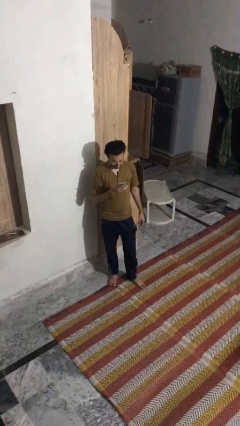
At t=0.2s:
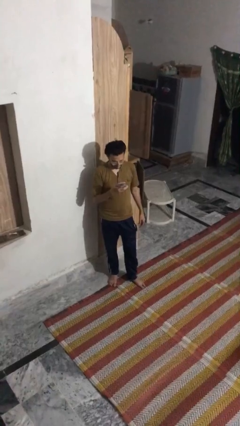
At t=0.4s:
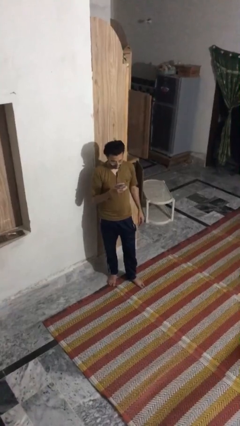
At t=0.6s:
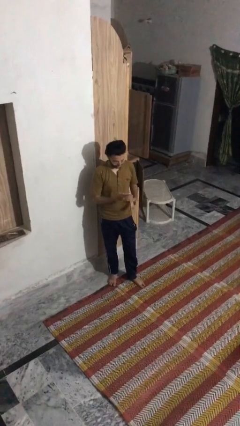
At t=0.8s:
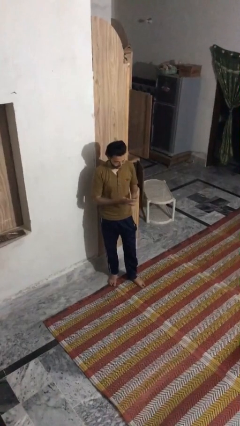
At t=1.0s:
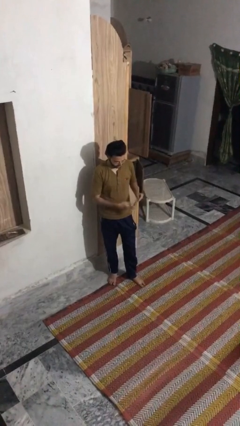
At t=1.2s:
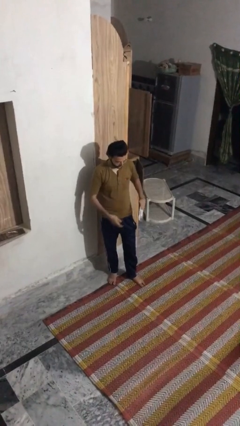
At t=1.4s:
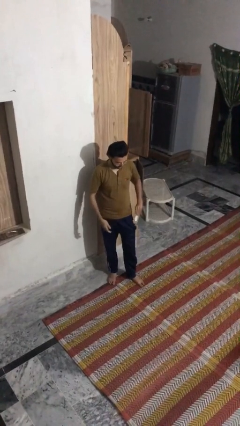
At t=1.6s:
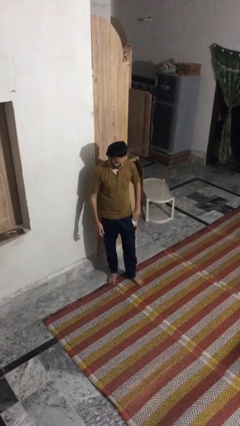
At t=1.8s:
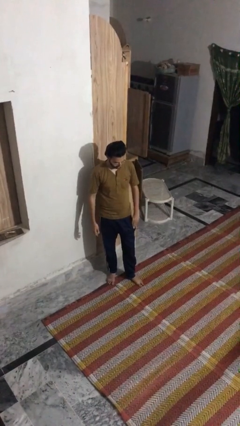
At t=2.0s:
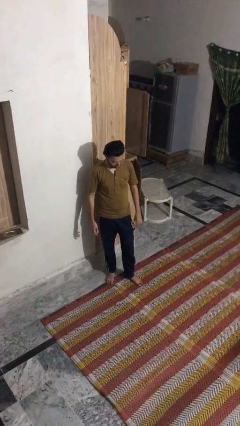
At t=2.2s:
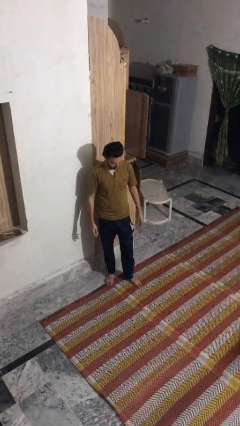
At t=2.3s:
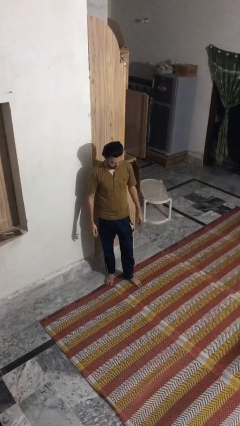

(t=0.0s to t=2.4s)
person puts phone into pocket

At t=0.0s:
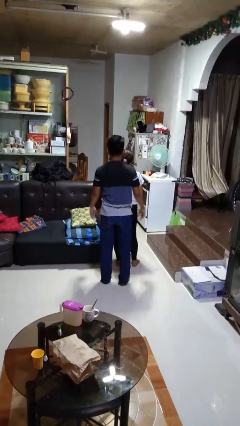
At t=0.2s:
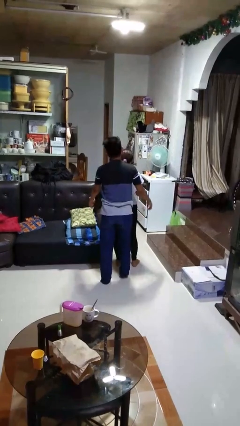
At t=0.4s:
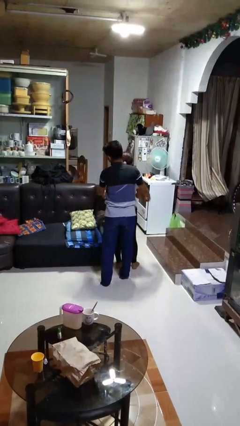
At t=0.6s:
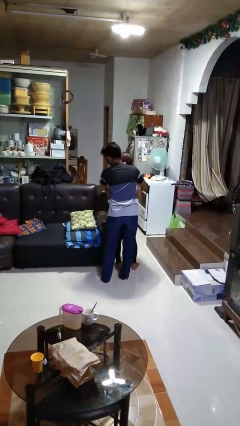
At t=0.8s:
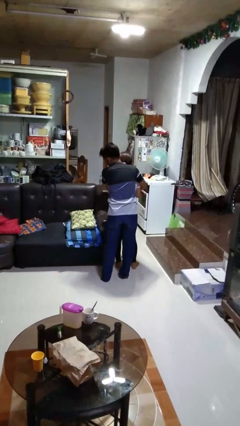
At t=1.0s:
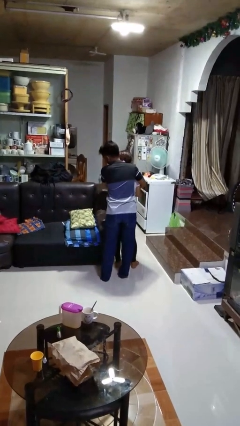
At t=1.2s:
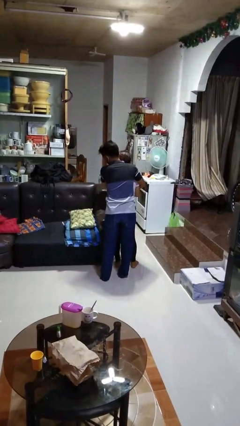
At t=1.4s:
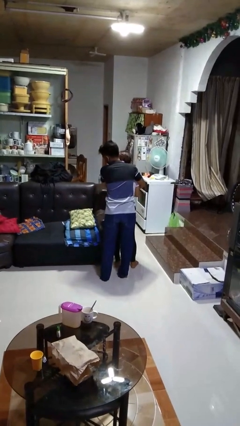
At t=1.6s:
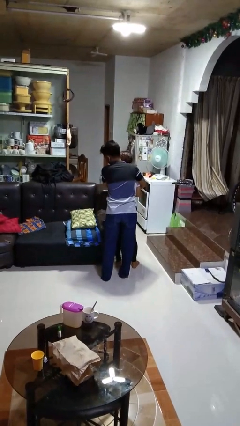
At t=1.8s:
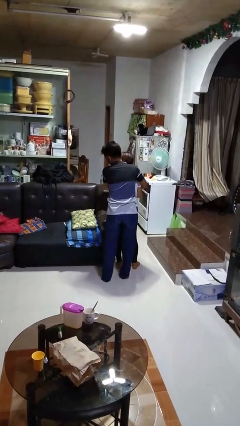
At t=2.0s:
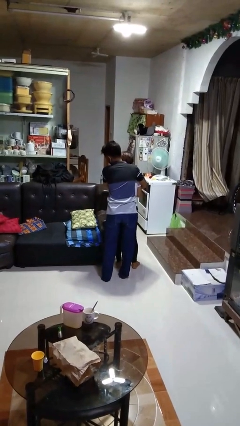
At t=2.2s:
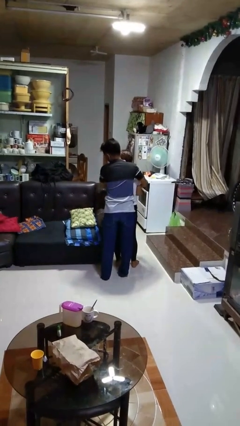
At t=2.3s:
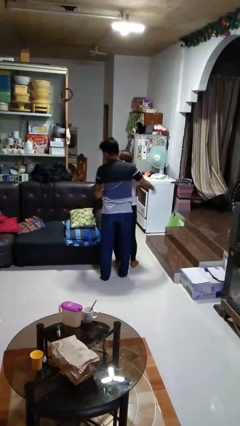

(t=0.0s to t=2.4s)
person hugs person from behind

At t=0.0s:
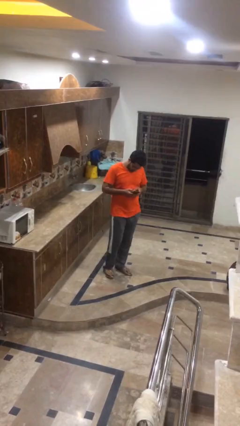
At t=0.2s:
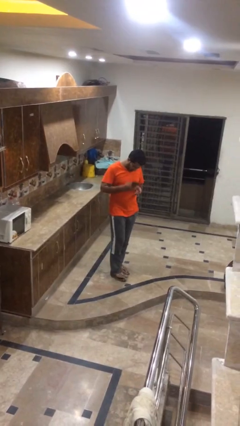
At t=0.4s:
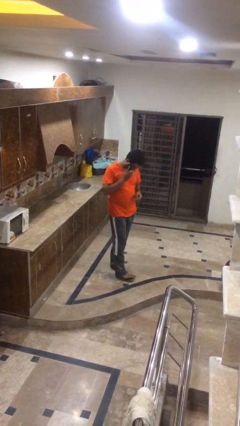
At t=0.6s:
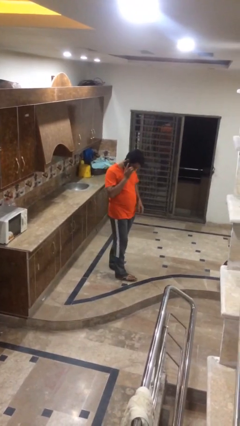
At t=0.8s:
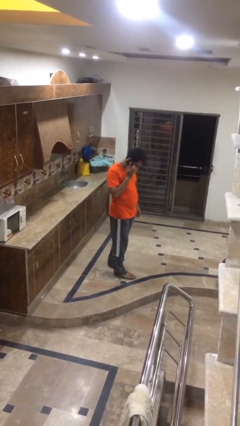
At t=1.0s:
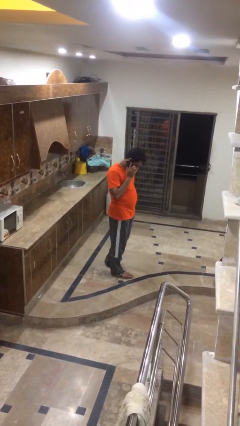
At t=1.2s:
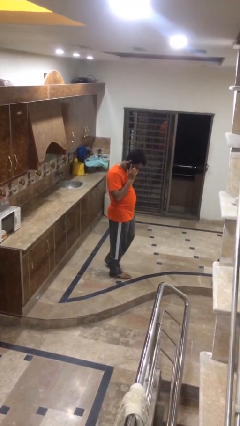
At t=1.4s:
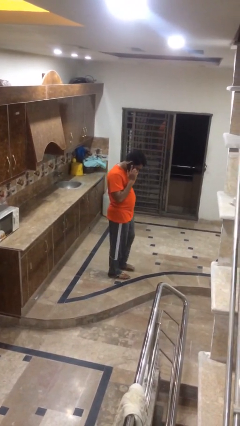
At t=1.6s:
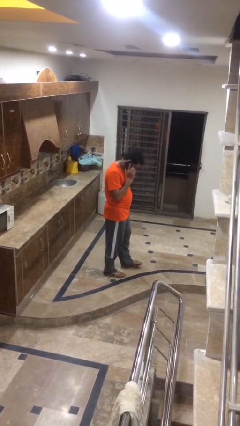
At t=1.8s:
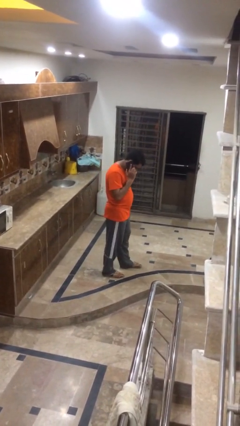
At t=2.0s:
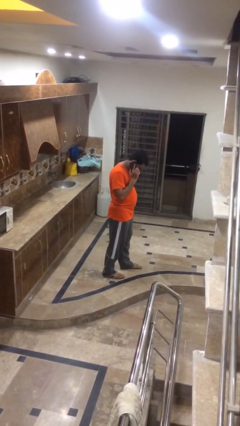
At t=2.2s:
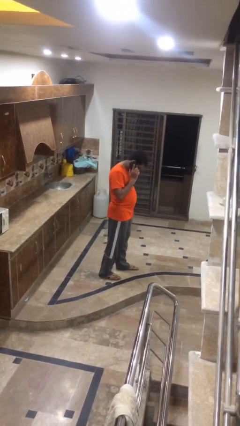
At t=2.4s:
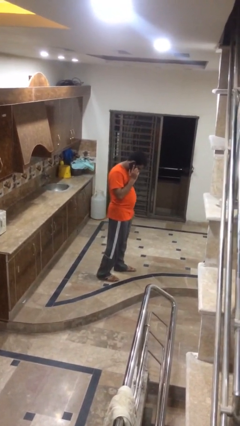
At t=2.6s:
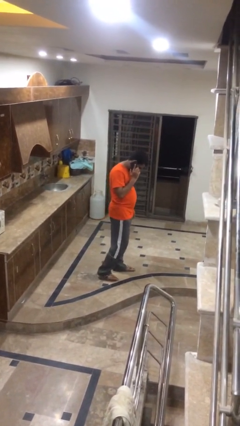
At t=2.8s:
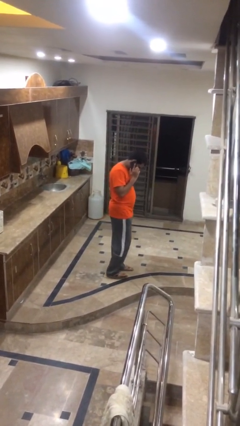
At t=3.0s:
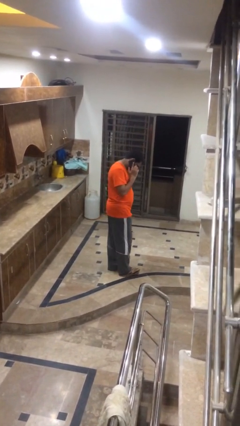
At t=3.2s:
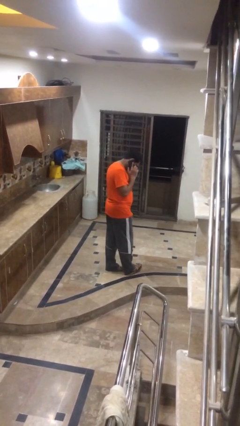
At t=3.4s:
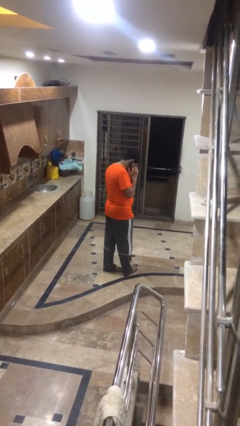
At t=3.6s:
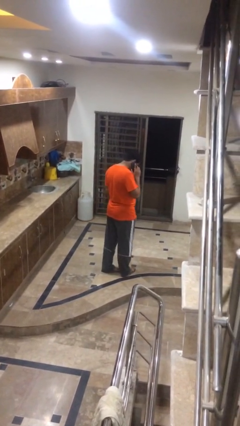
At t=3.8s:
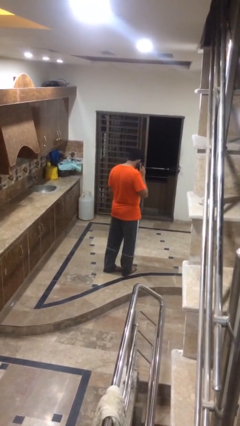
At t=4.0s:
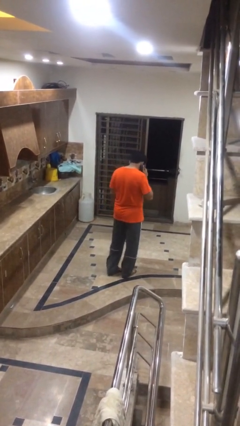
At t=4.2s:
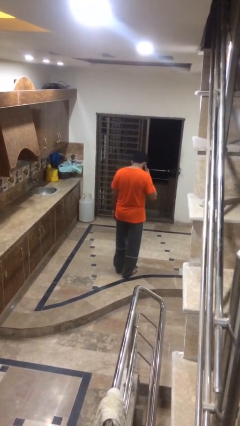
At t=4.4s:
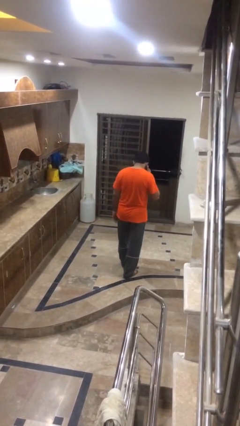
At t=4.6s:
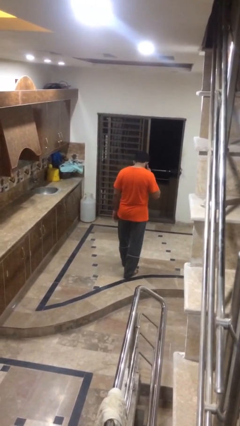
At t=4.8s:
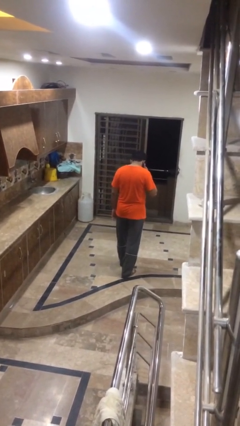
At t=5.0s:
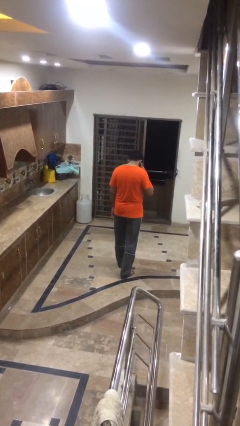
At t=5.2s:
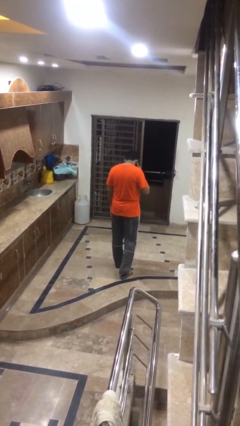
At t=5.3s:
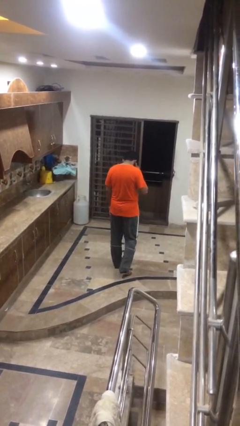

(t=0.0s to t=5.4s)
person talks on phone

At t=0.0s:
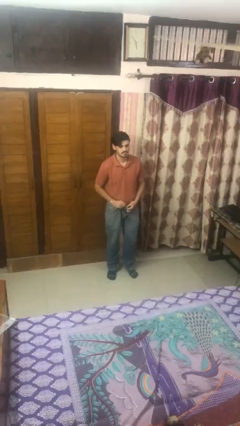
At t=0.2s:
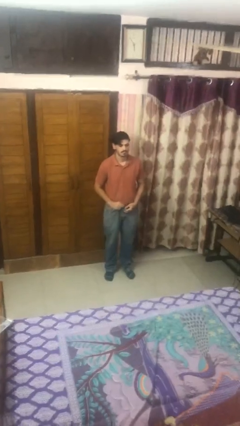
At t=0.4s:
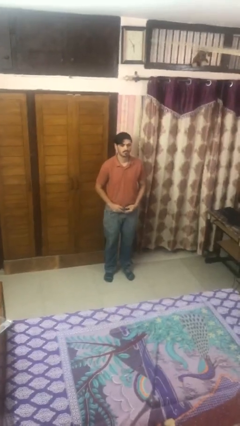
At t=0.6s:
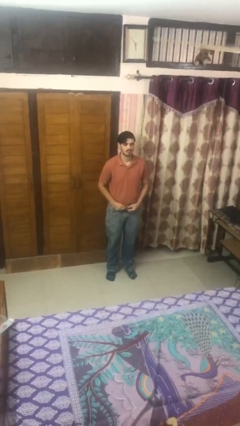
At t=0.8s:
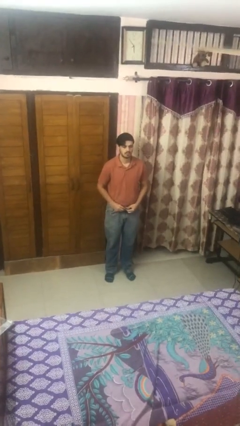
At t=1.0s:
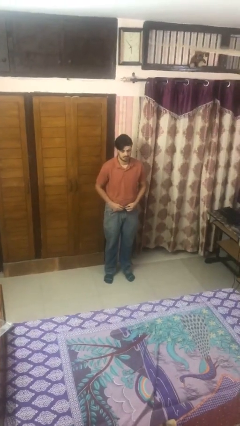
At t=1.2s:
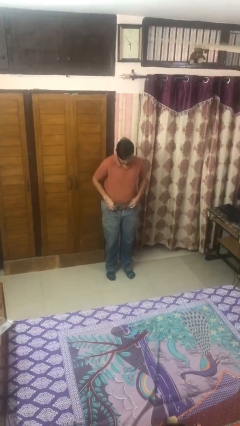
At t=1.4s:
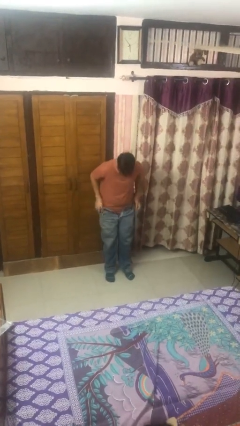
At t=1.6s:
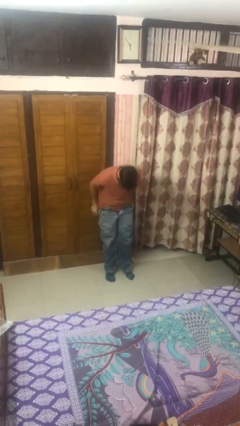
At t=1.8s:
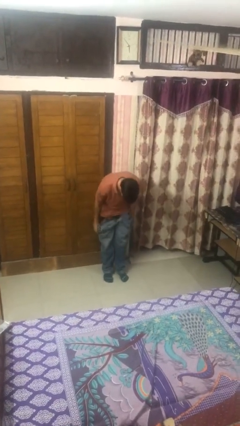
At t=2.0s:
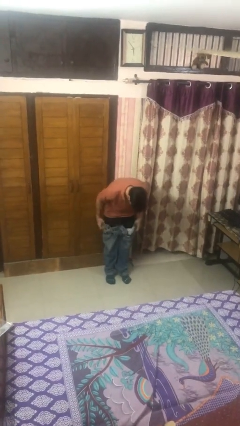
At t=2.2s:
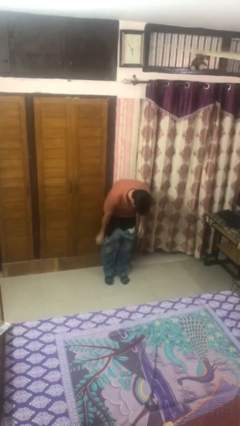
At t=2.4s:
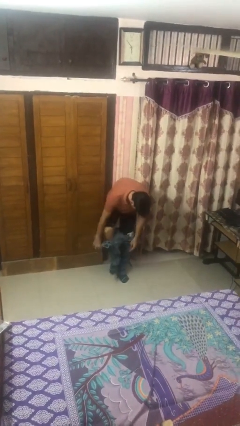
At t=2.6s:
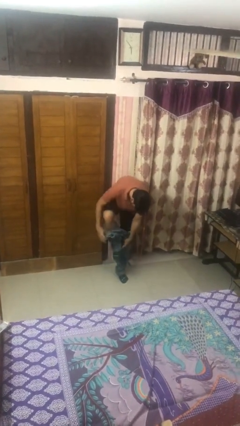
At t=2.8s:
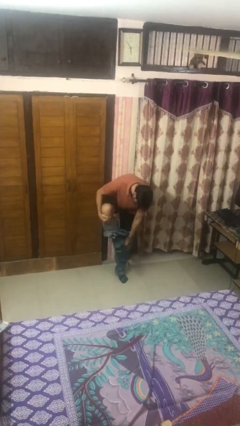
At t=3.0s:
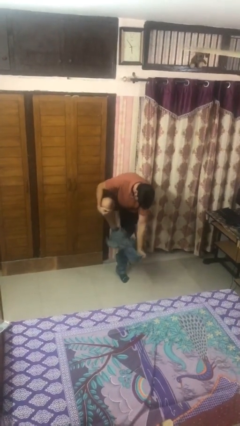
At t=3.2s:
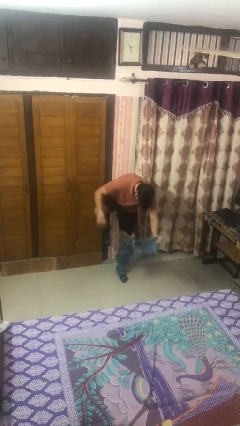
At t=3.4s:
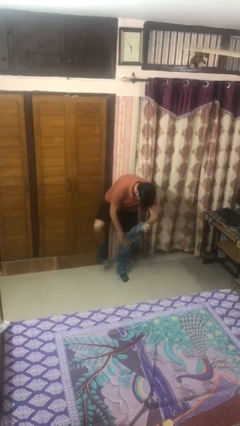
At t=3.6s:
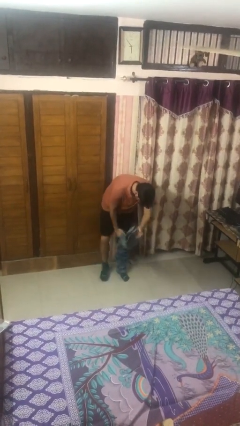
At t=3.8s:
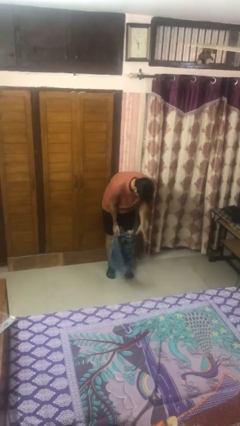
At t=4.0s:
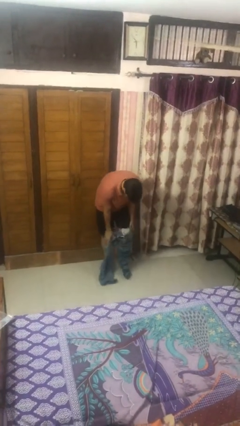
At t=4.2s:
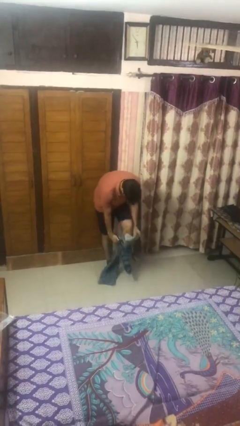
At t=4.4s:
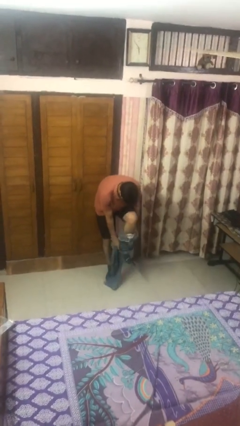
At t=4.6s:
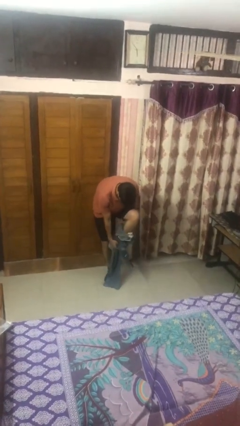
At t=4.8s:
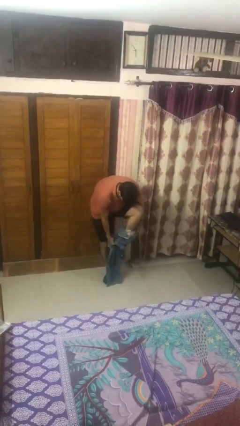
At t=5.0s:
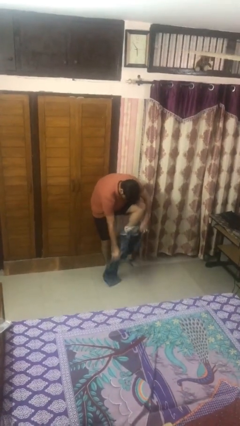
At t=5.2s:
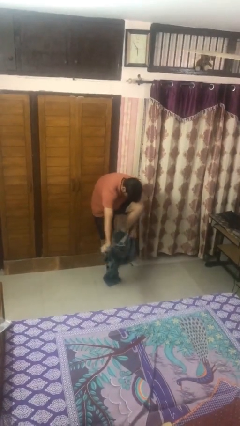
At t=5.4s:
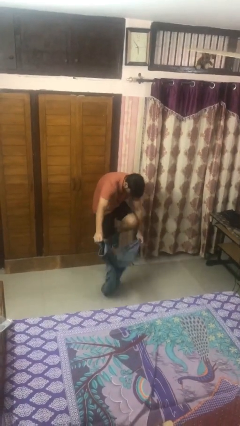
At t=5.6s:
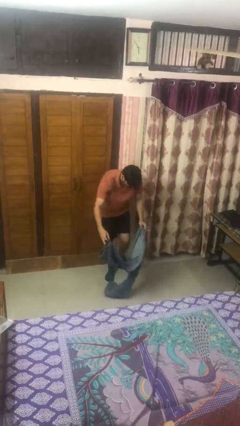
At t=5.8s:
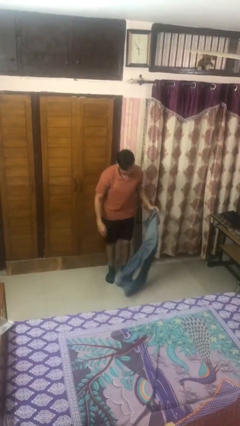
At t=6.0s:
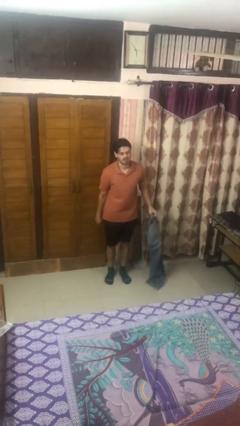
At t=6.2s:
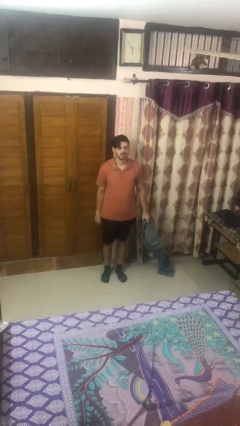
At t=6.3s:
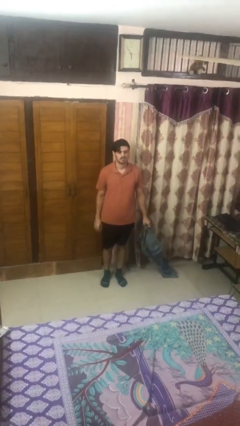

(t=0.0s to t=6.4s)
person takes off pants

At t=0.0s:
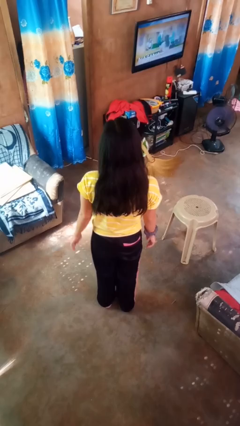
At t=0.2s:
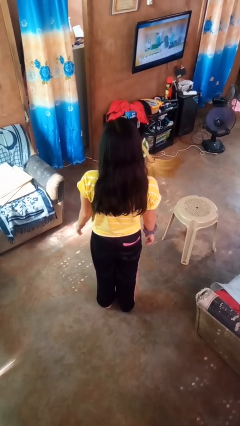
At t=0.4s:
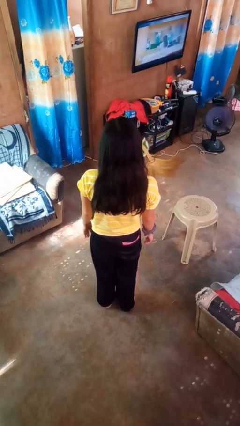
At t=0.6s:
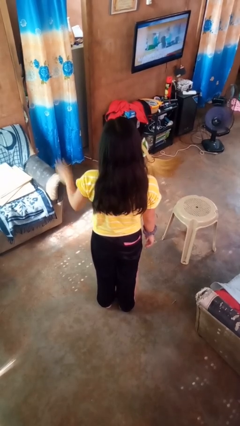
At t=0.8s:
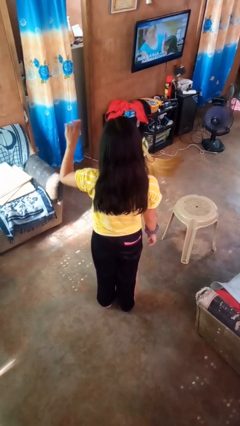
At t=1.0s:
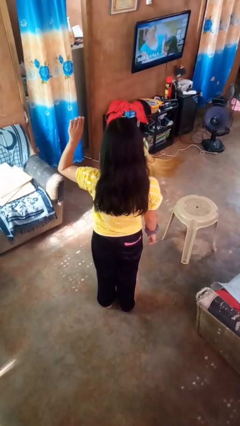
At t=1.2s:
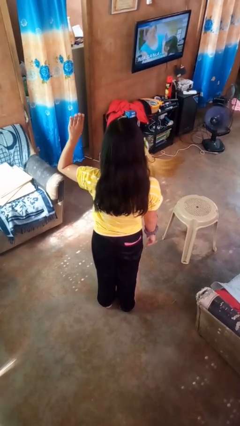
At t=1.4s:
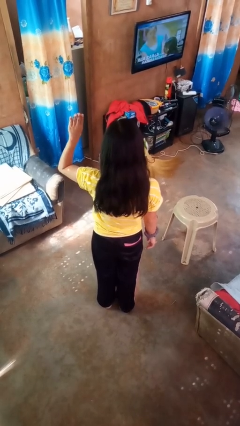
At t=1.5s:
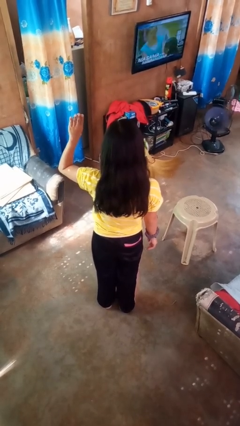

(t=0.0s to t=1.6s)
person gestures number four
